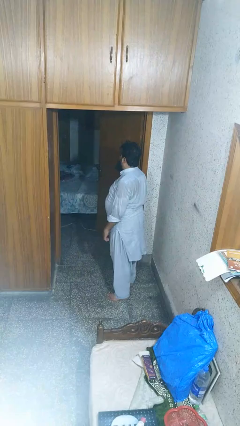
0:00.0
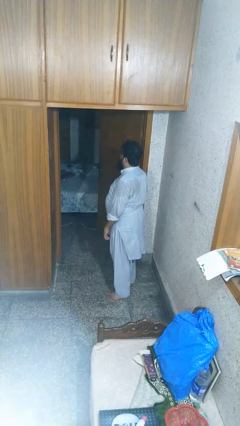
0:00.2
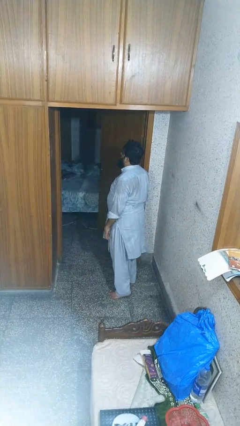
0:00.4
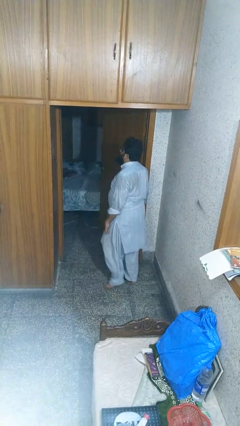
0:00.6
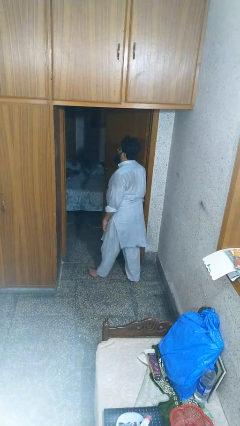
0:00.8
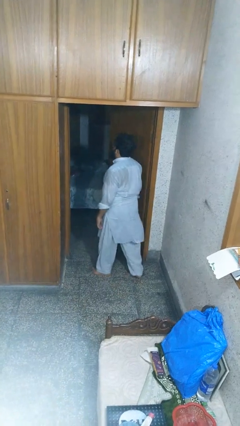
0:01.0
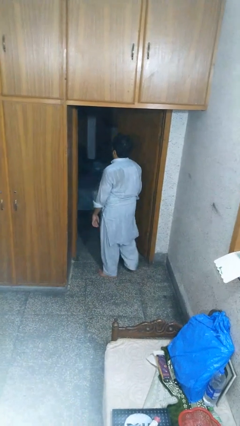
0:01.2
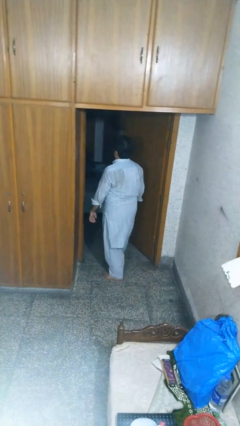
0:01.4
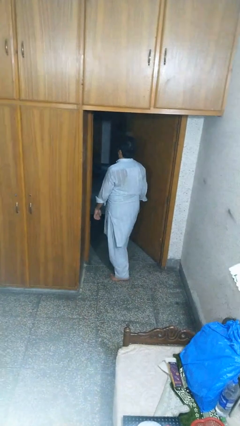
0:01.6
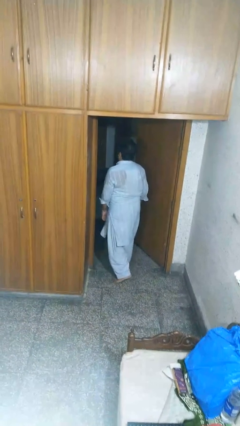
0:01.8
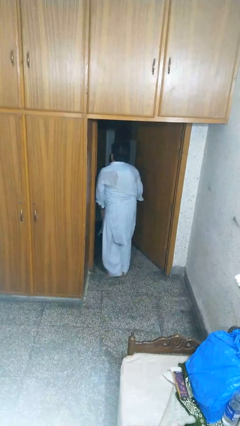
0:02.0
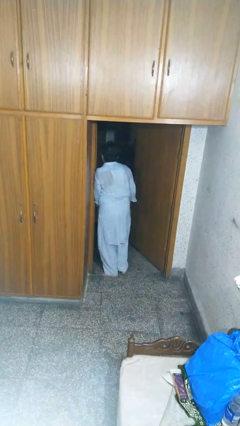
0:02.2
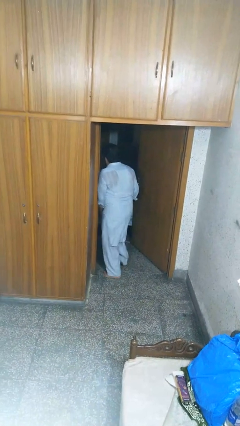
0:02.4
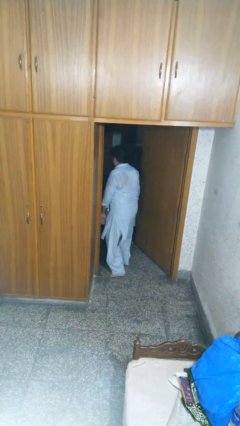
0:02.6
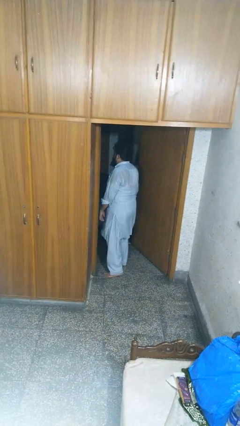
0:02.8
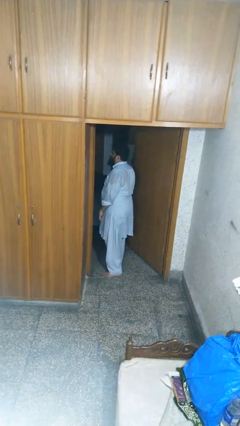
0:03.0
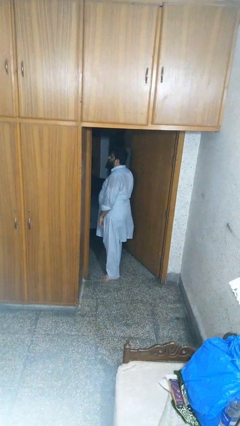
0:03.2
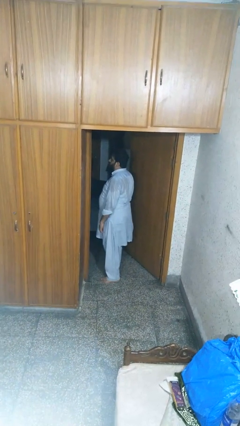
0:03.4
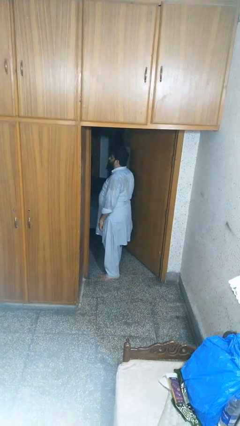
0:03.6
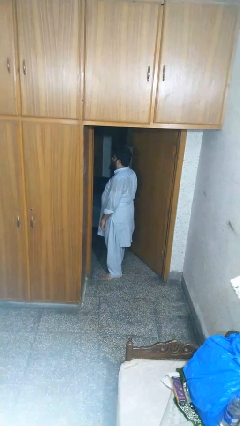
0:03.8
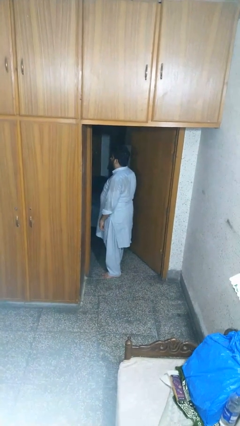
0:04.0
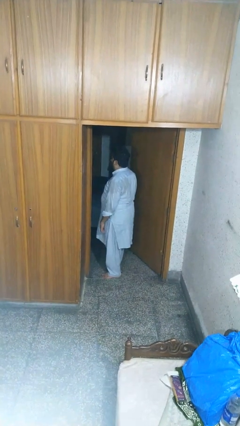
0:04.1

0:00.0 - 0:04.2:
person bumps into wall

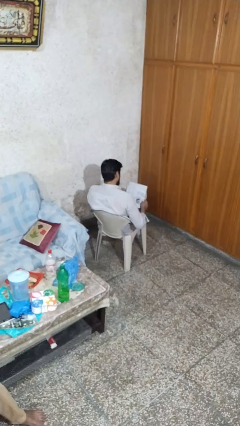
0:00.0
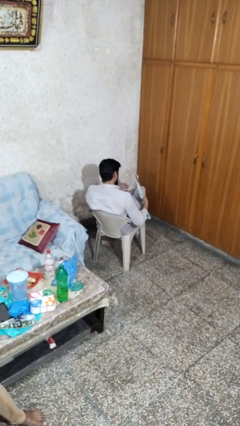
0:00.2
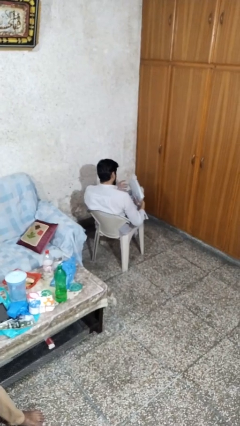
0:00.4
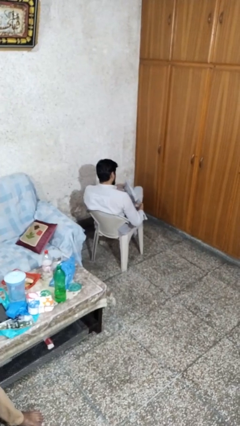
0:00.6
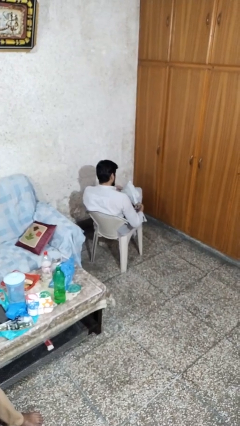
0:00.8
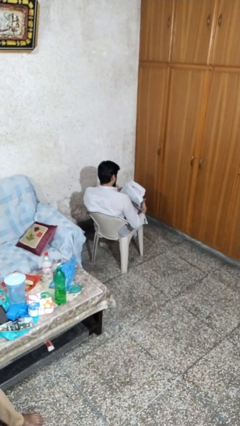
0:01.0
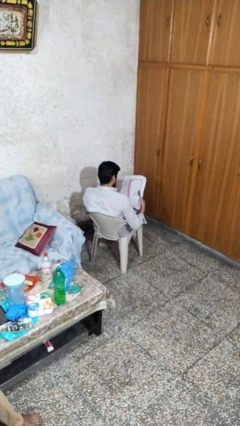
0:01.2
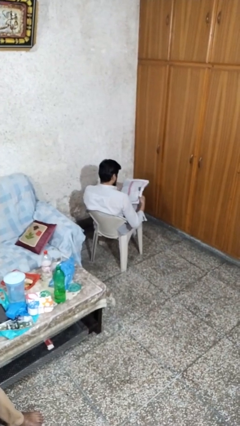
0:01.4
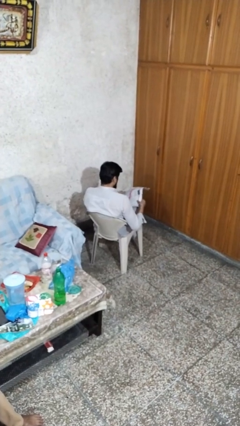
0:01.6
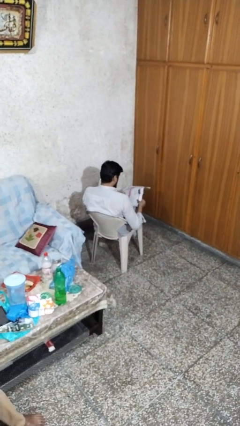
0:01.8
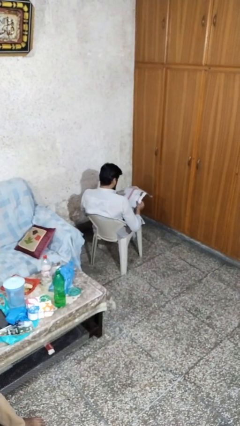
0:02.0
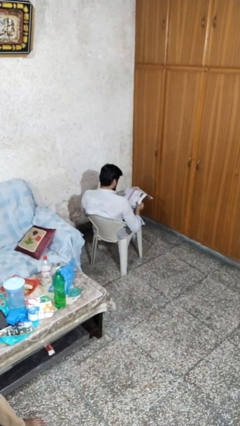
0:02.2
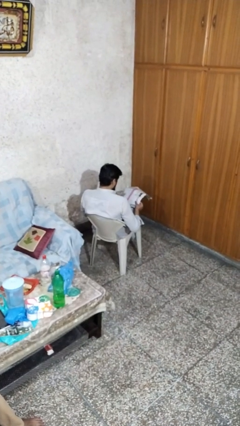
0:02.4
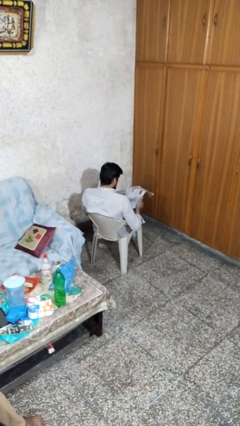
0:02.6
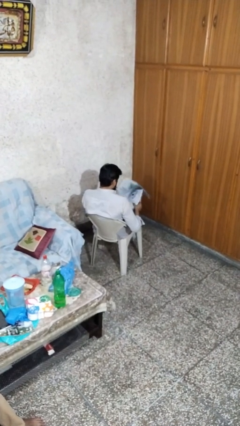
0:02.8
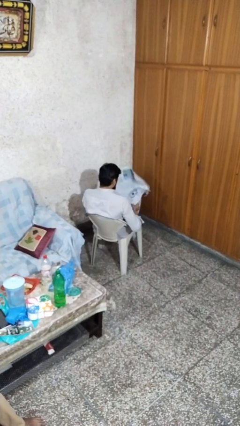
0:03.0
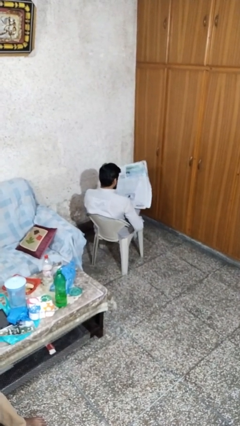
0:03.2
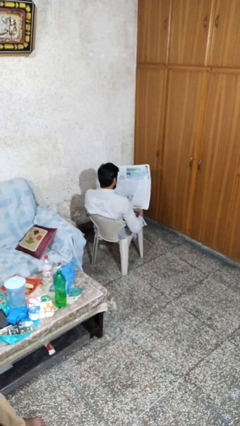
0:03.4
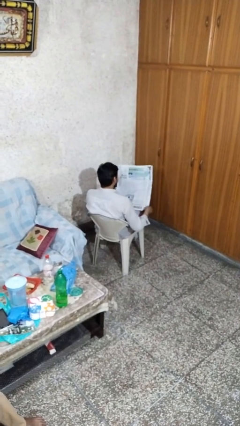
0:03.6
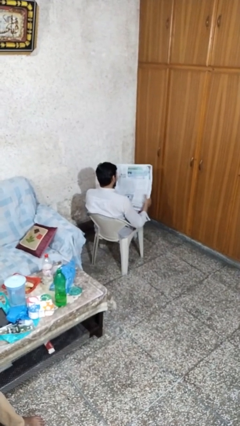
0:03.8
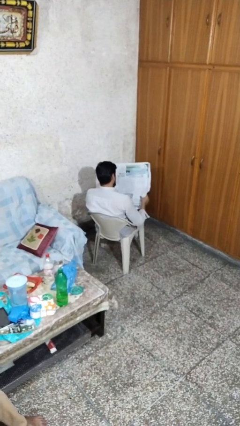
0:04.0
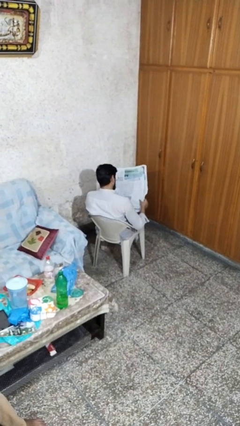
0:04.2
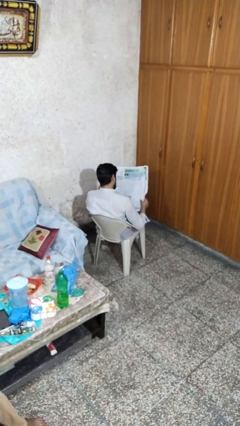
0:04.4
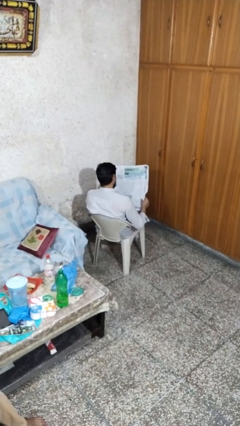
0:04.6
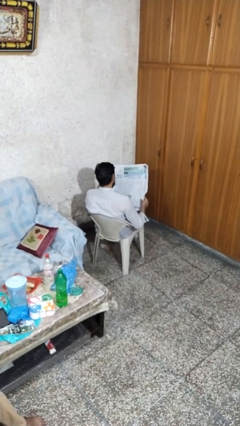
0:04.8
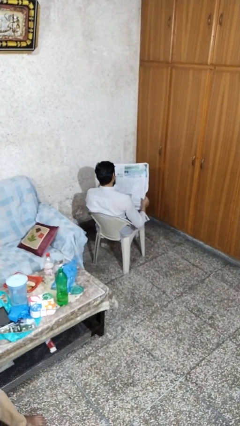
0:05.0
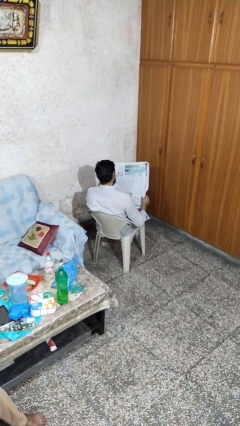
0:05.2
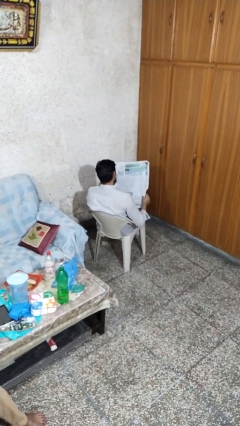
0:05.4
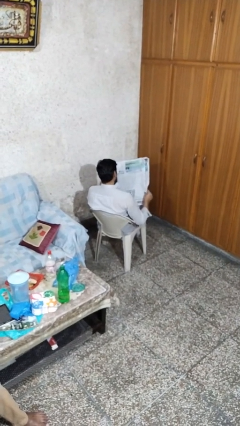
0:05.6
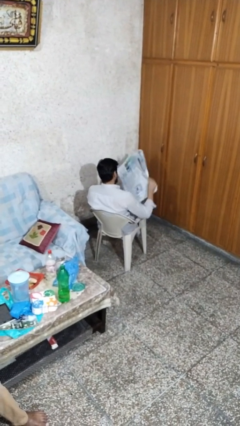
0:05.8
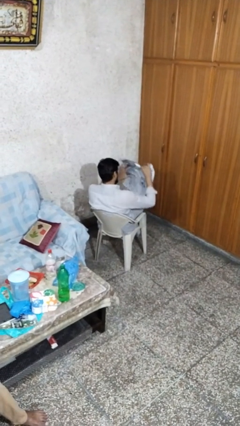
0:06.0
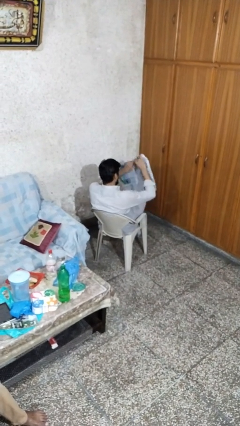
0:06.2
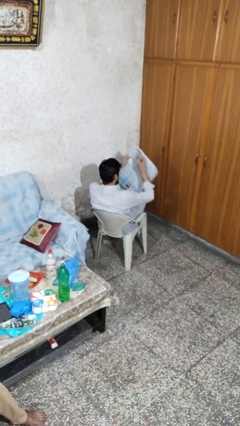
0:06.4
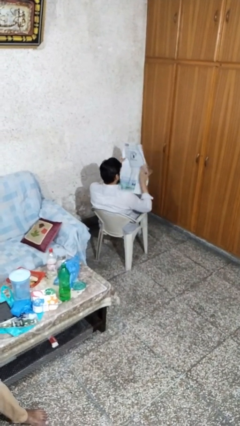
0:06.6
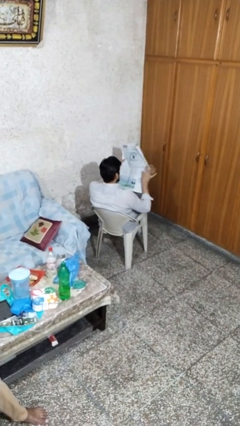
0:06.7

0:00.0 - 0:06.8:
person reads newspaper

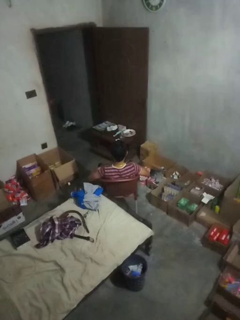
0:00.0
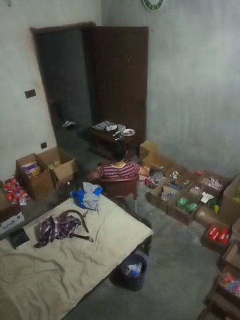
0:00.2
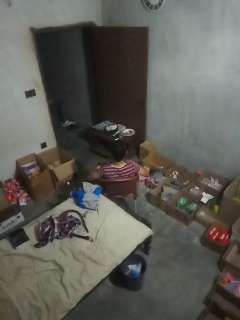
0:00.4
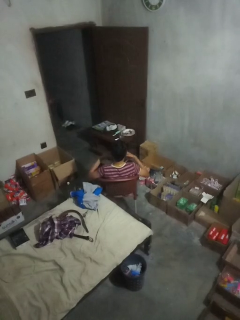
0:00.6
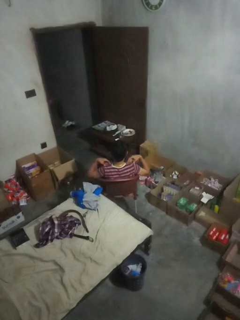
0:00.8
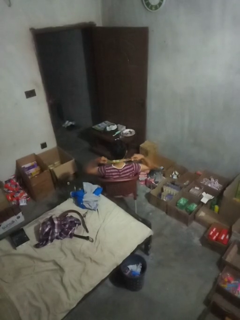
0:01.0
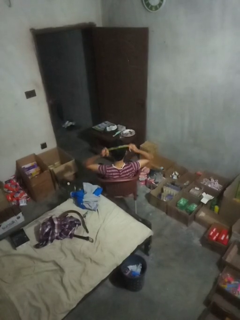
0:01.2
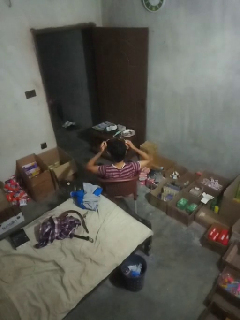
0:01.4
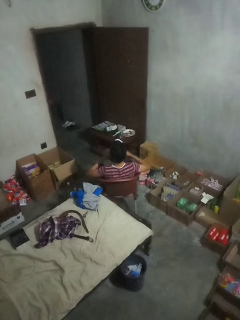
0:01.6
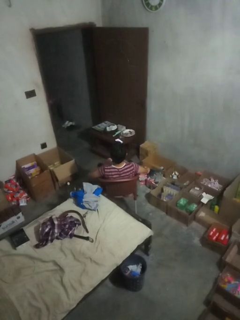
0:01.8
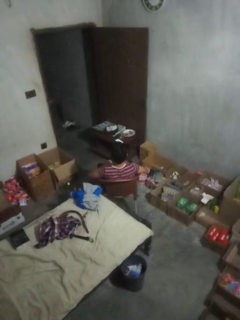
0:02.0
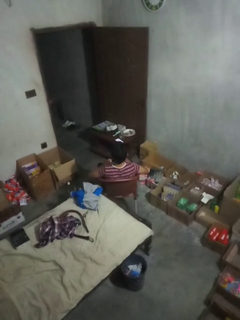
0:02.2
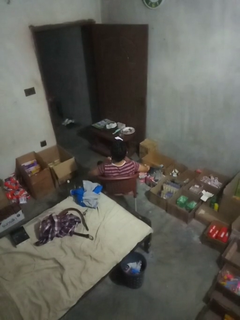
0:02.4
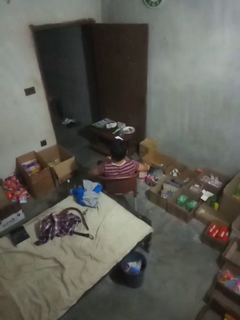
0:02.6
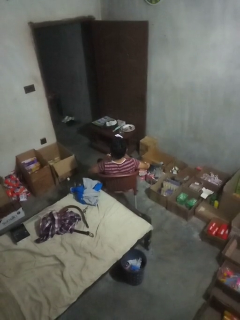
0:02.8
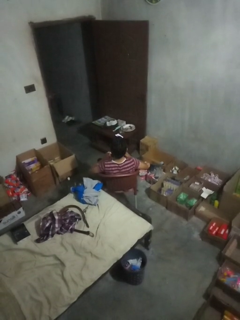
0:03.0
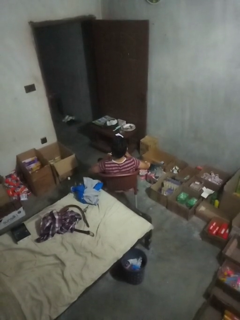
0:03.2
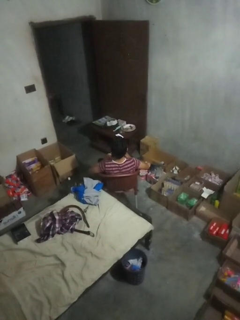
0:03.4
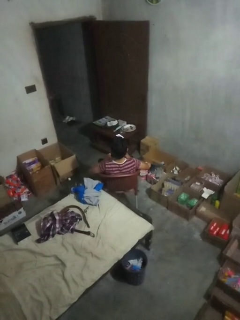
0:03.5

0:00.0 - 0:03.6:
person takes off necklace

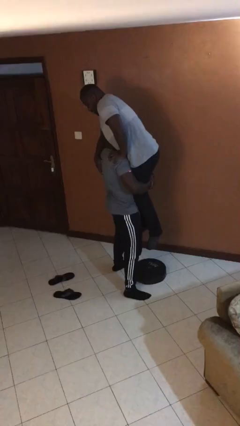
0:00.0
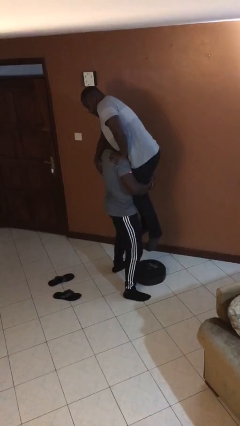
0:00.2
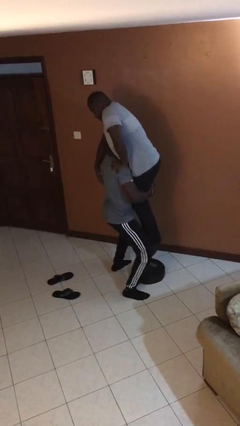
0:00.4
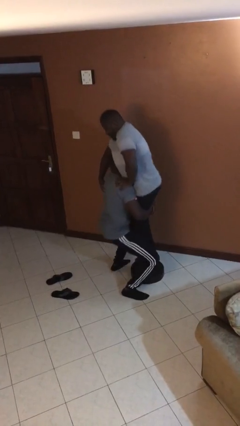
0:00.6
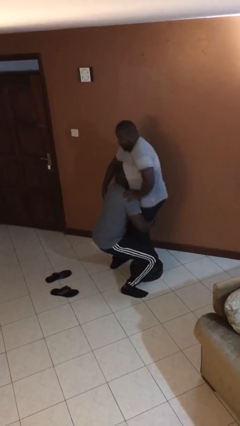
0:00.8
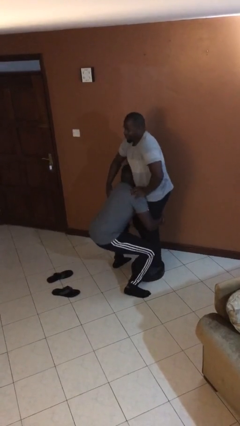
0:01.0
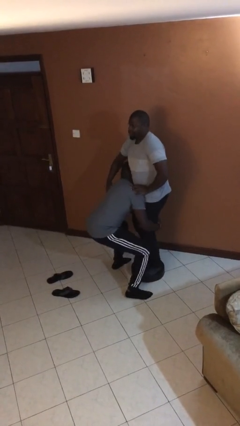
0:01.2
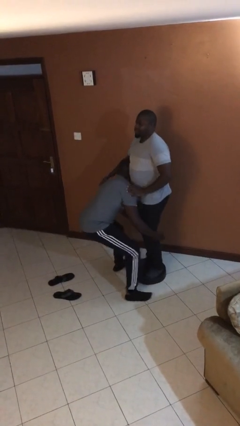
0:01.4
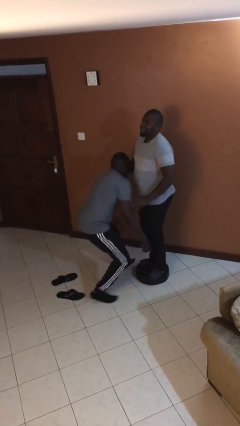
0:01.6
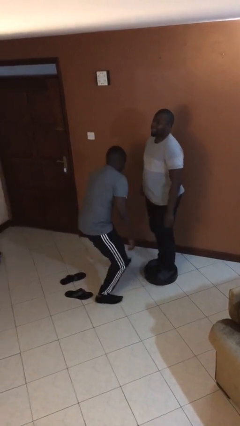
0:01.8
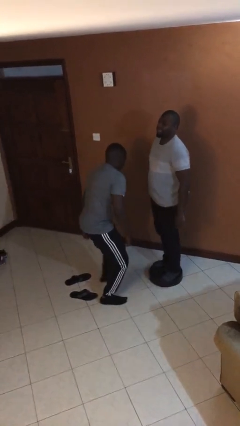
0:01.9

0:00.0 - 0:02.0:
person puts down person

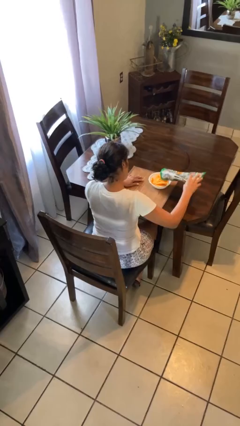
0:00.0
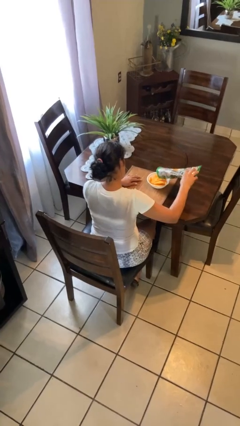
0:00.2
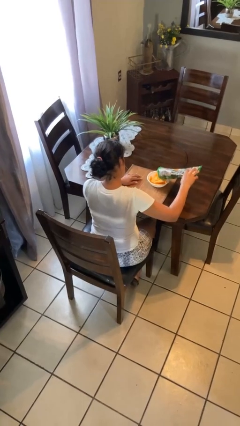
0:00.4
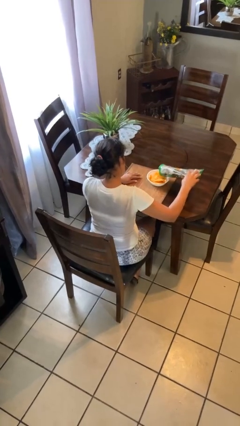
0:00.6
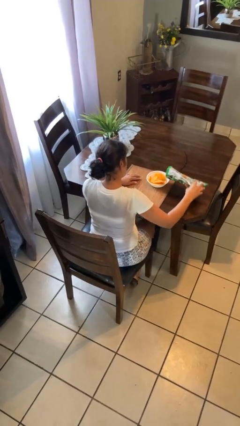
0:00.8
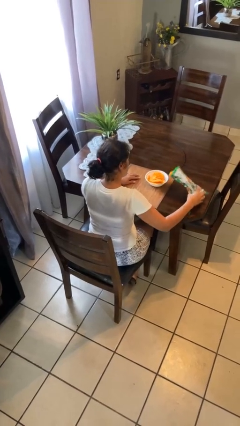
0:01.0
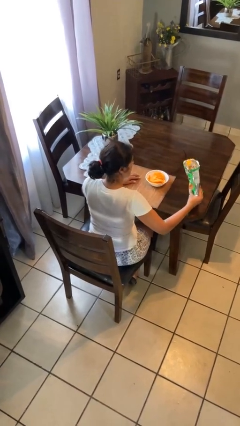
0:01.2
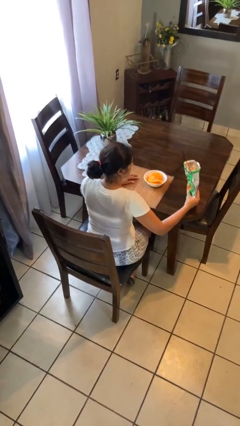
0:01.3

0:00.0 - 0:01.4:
person pours into bowl

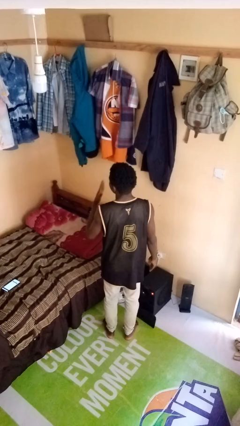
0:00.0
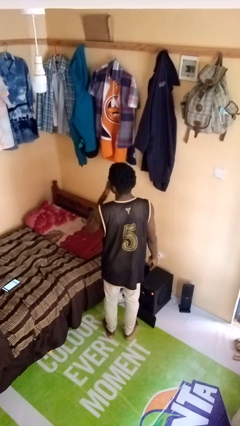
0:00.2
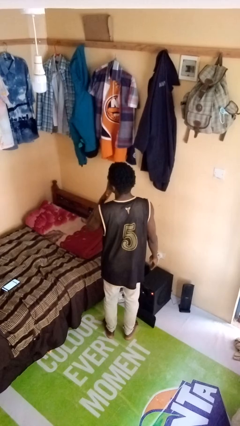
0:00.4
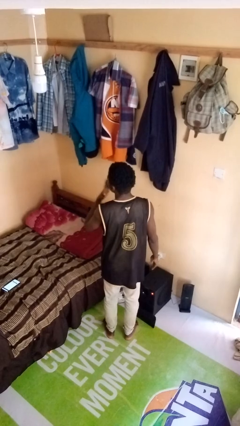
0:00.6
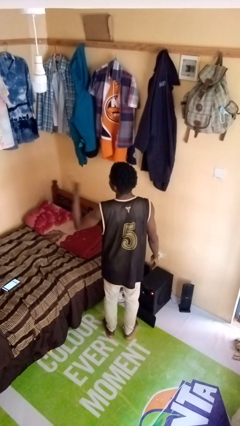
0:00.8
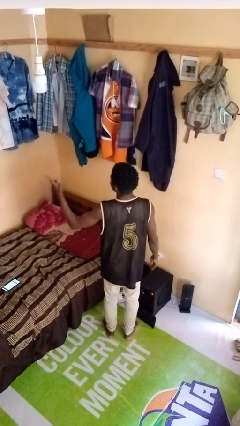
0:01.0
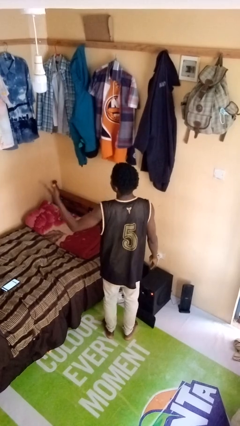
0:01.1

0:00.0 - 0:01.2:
person gestures blow kiss
